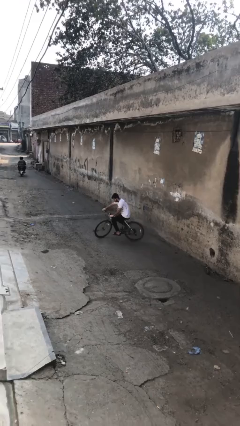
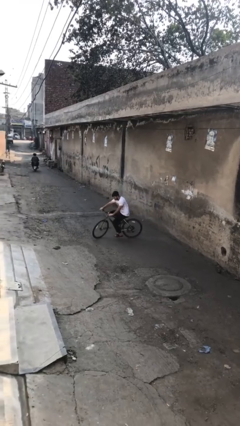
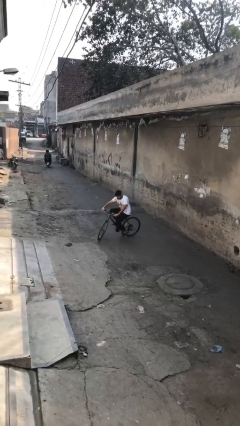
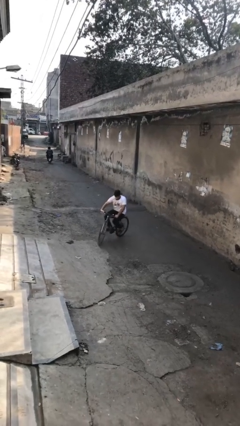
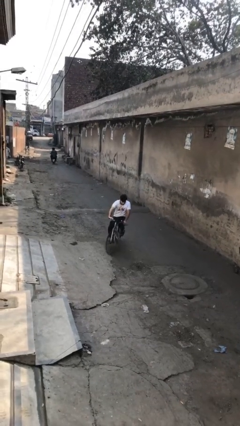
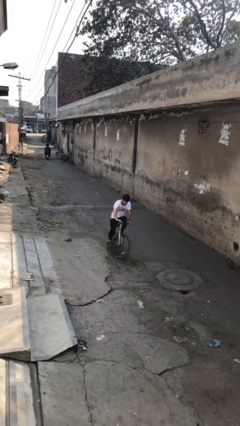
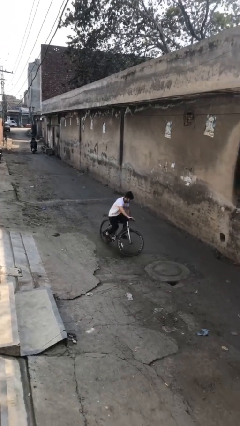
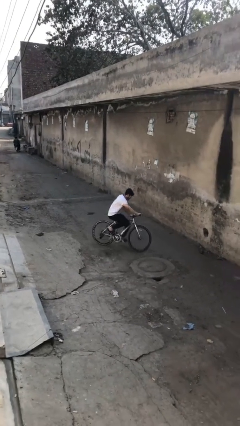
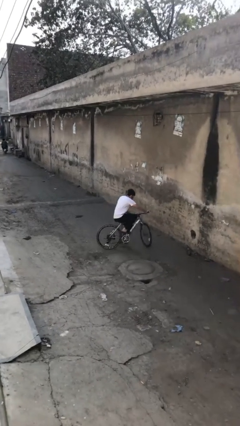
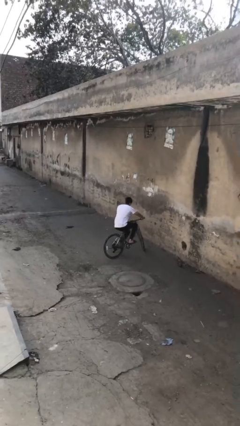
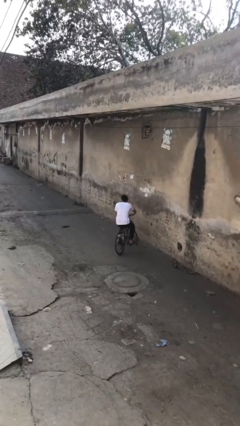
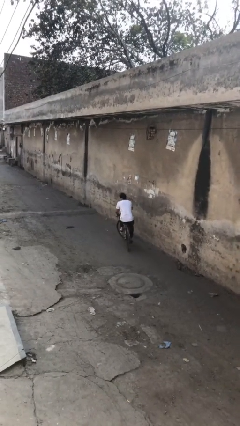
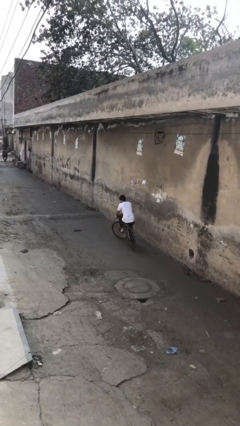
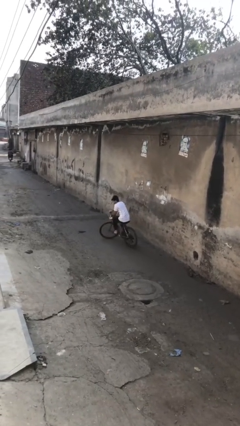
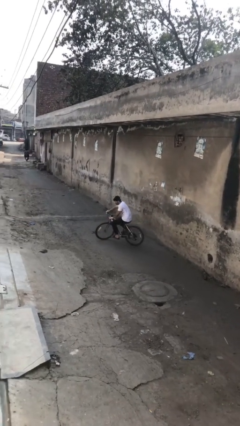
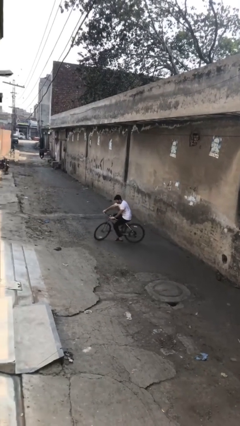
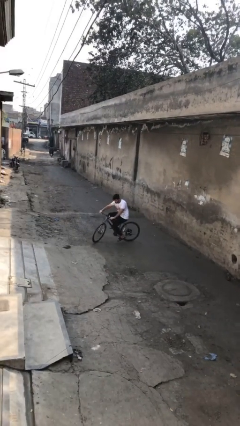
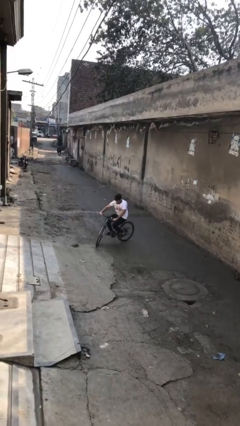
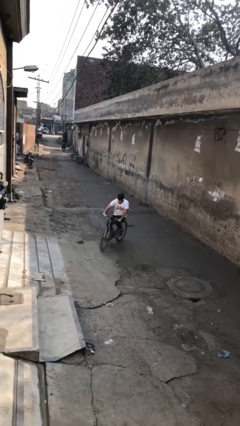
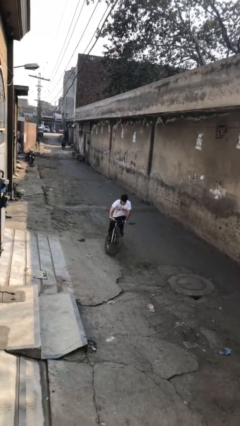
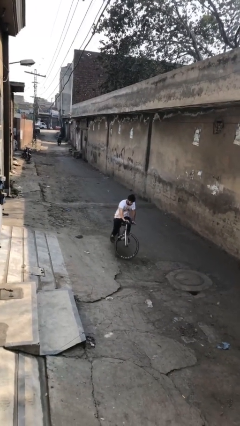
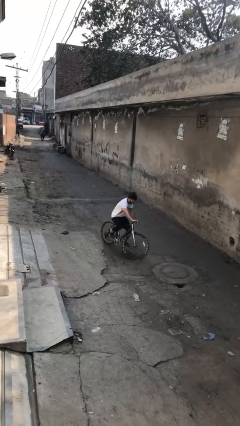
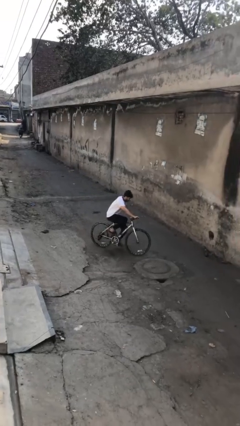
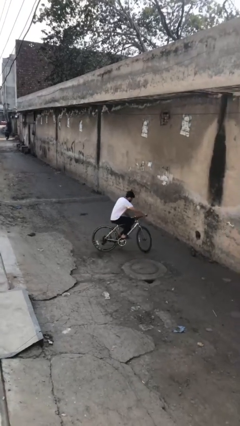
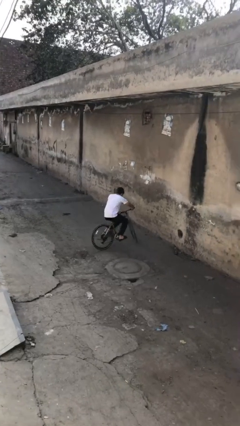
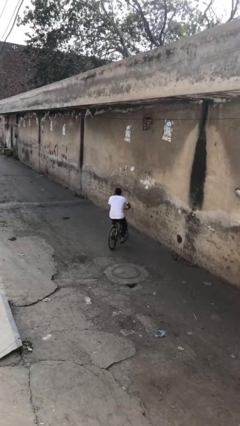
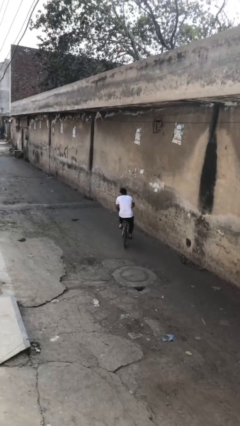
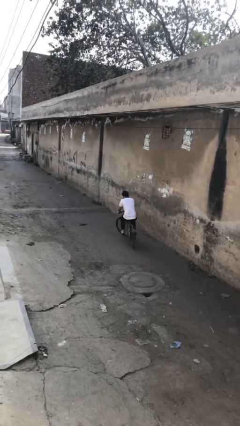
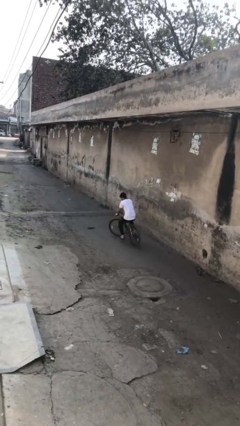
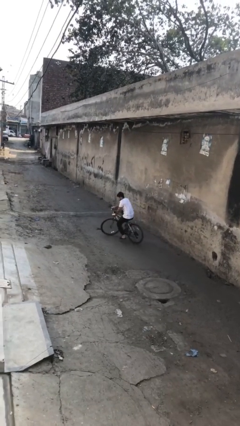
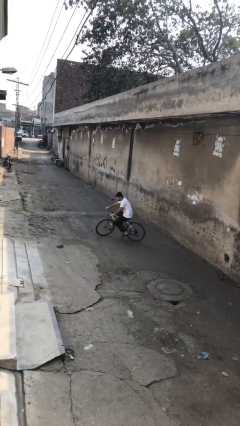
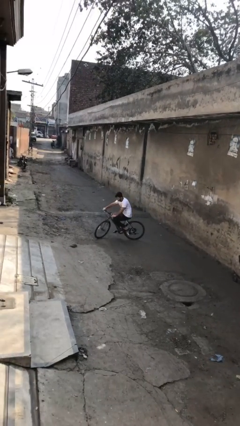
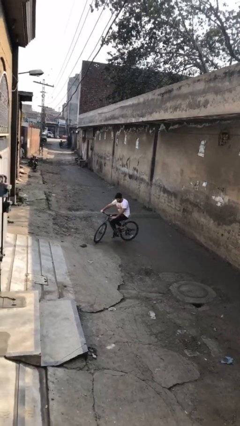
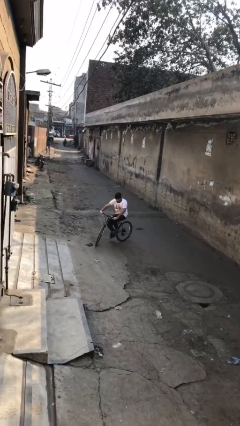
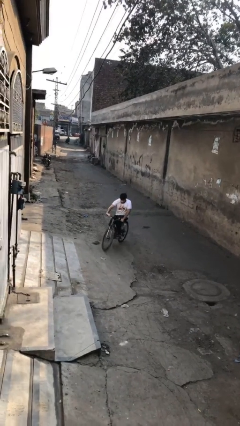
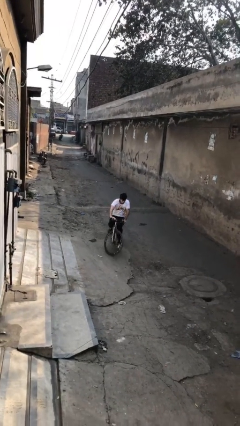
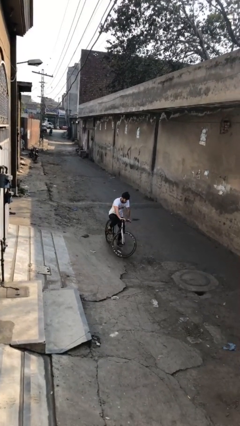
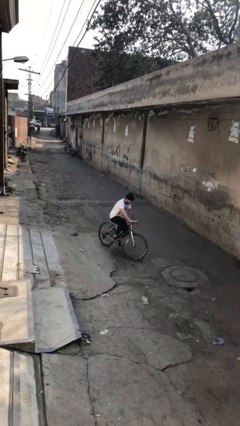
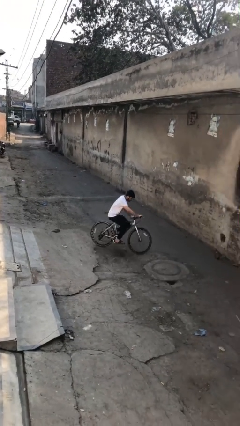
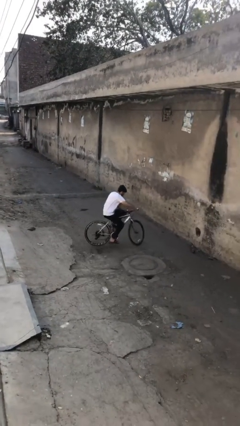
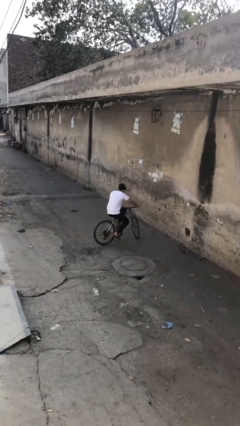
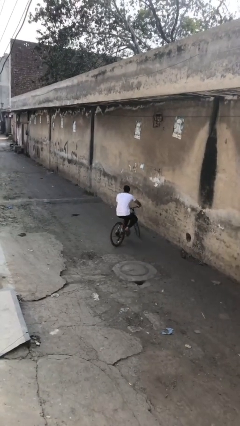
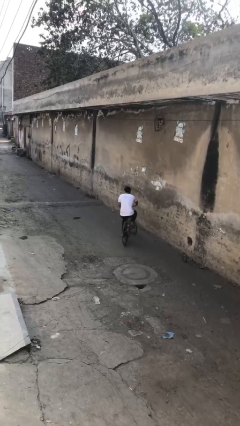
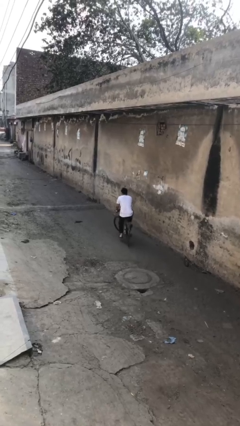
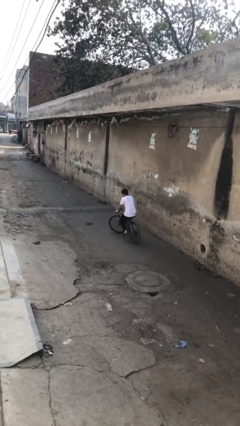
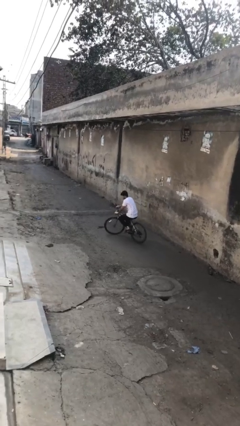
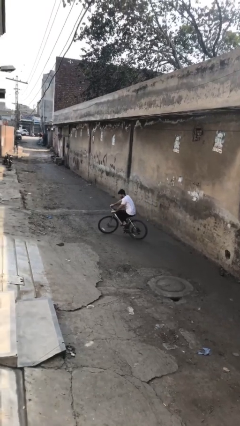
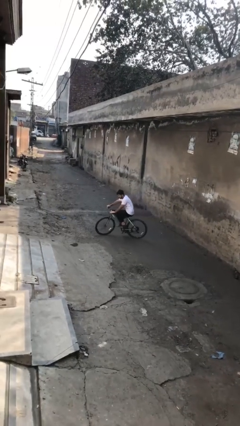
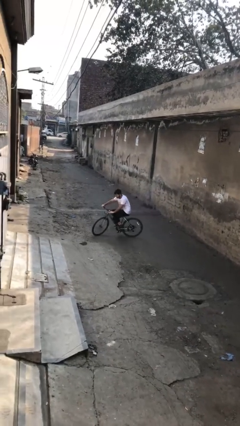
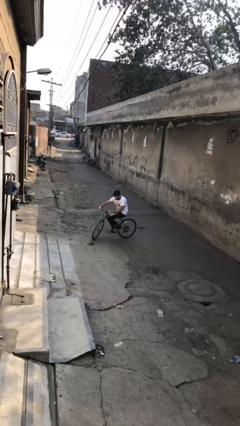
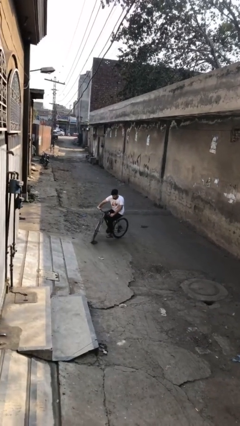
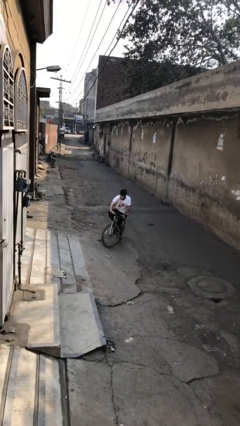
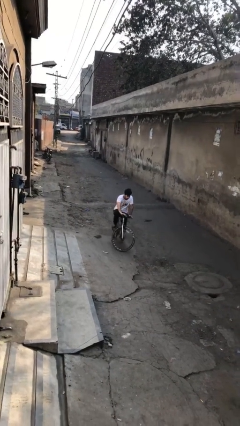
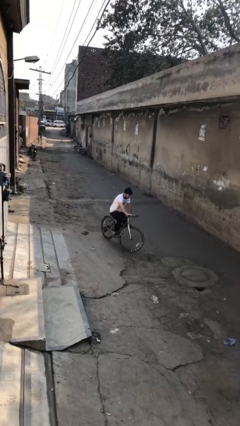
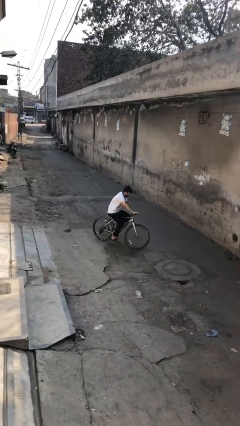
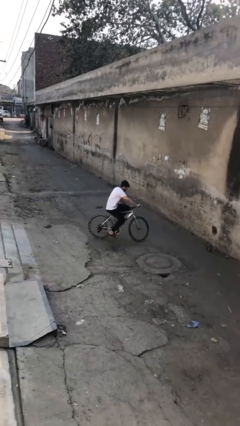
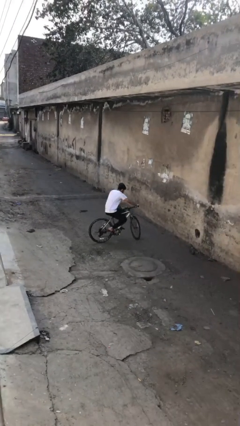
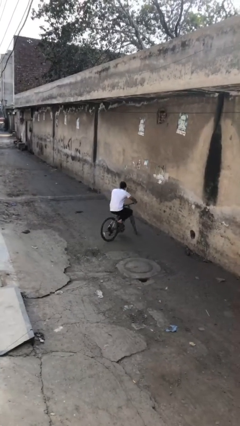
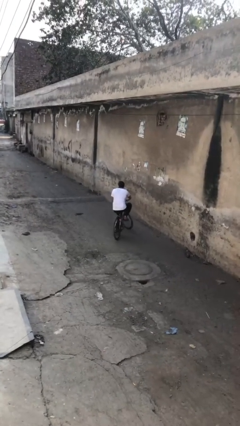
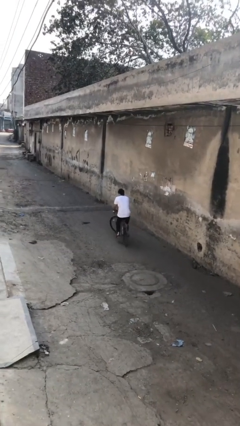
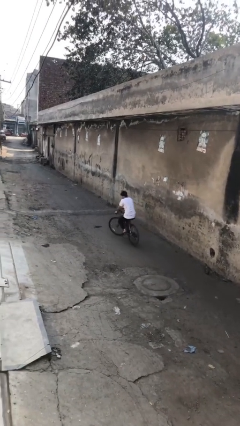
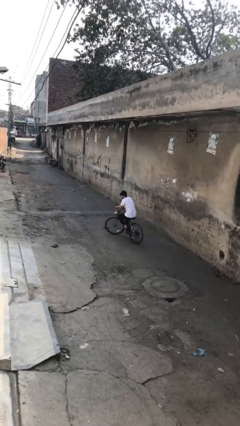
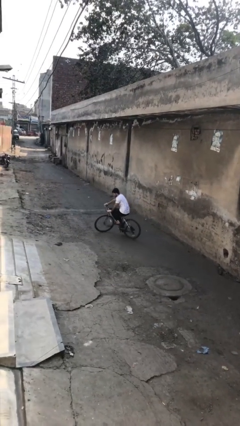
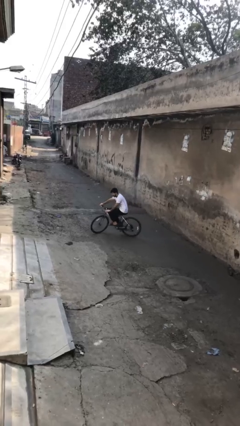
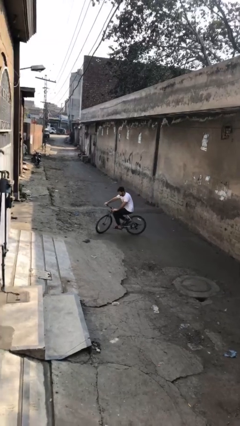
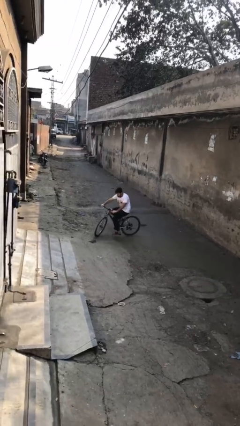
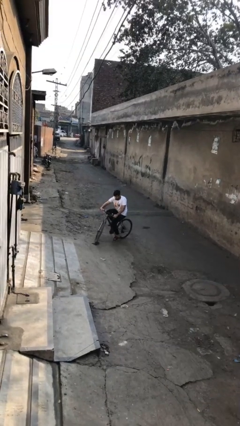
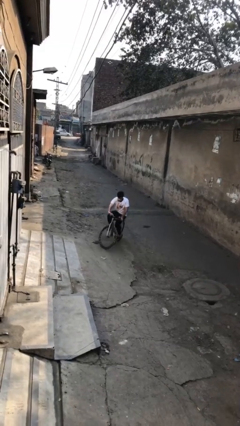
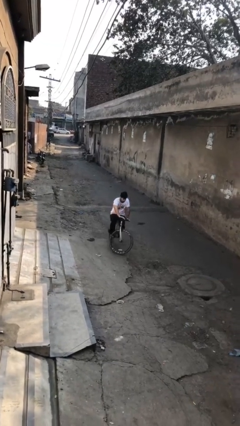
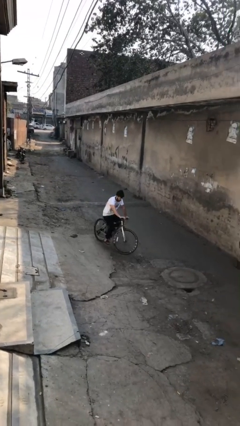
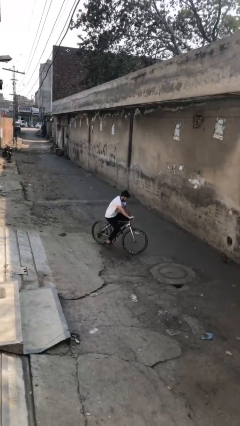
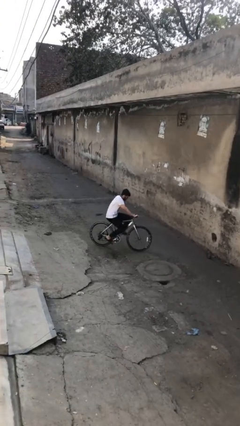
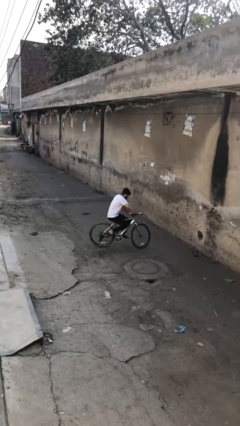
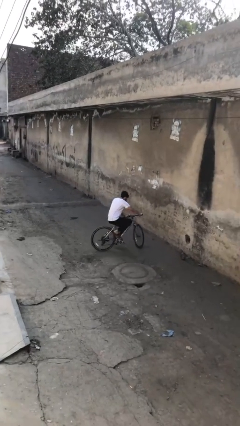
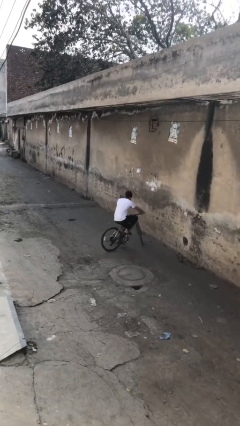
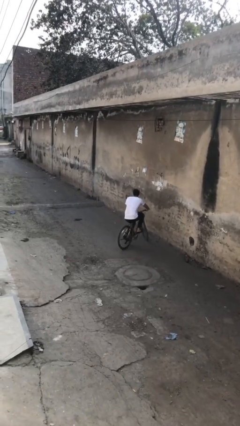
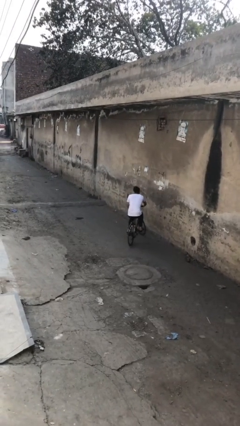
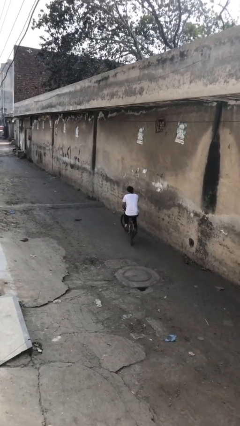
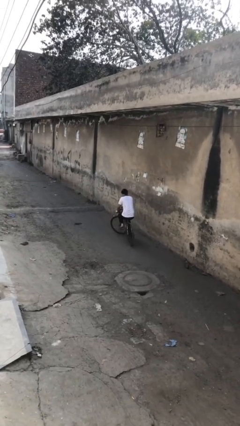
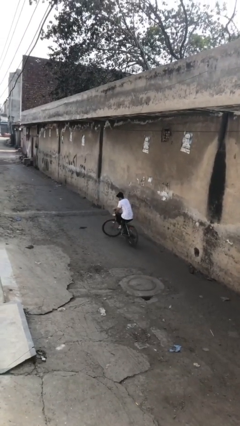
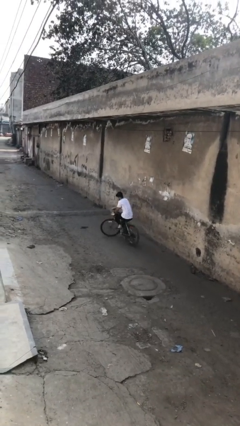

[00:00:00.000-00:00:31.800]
person rides bicycle

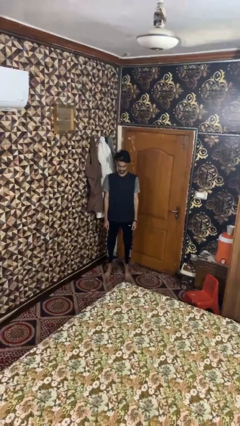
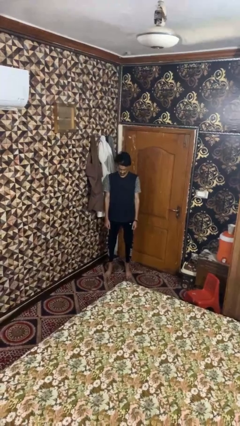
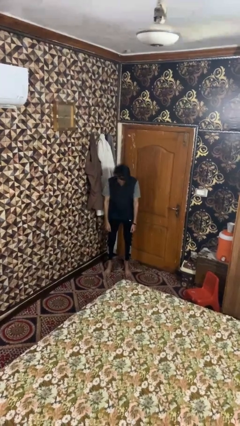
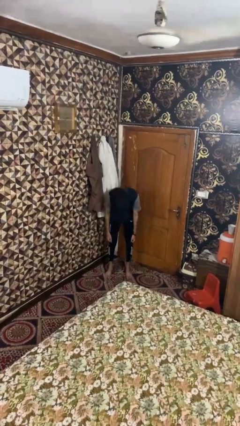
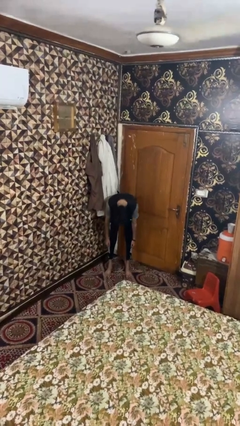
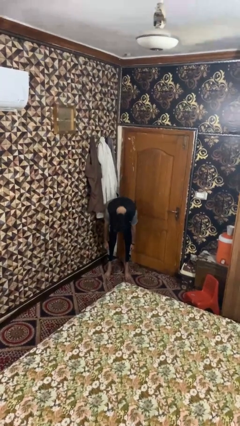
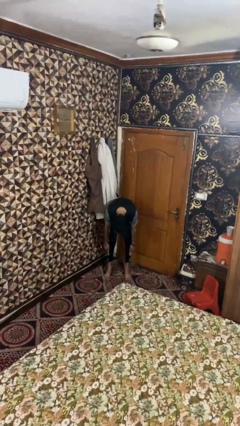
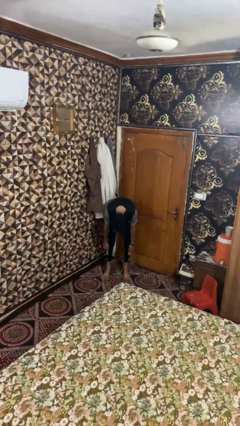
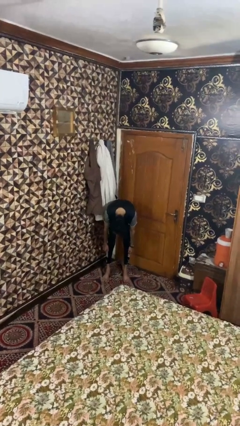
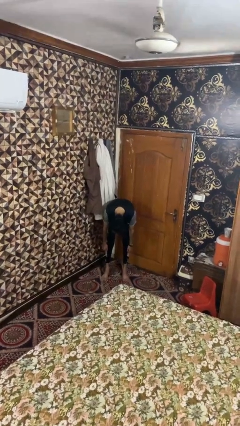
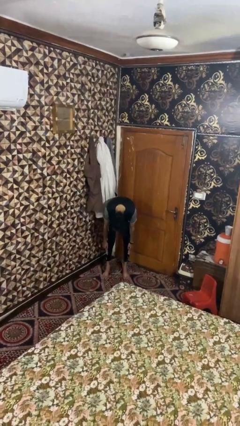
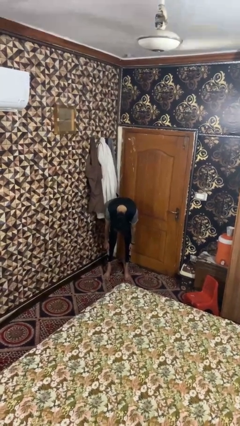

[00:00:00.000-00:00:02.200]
person bows
